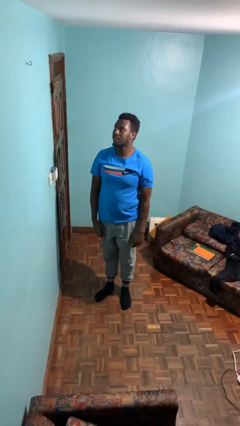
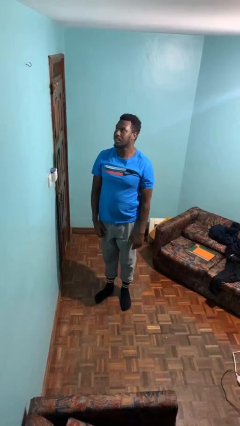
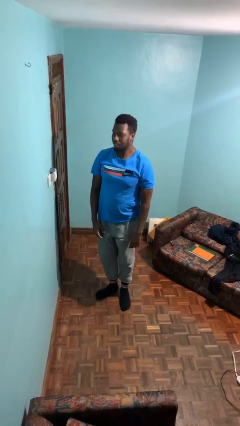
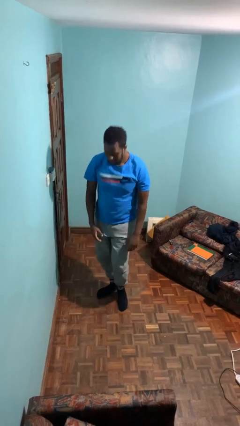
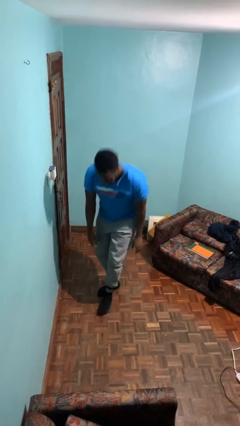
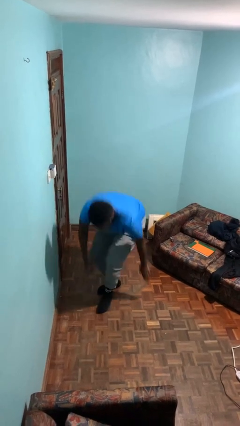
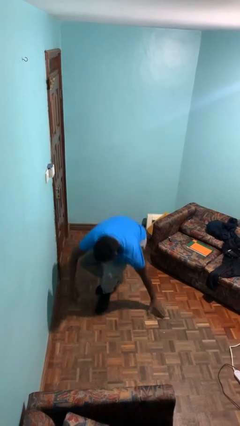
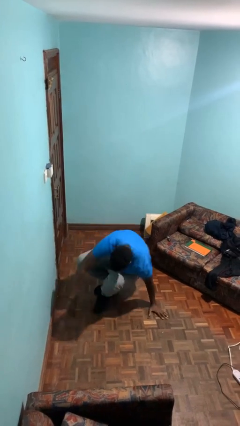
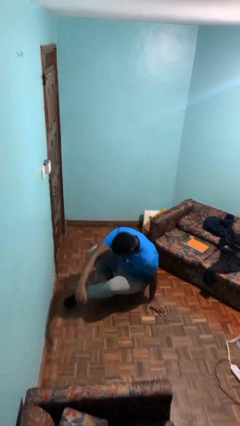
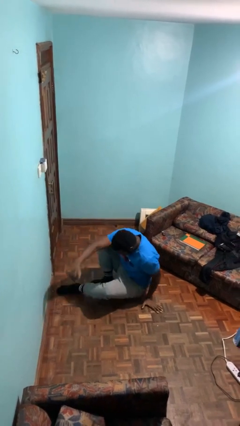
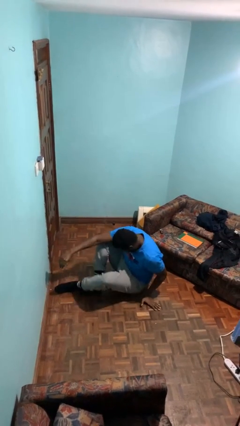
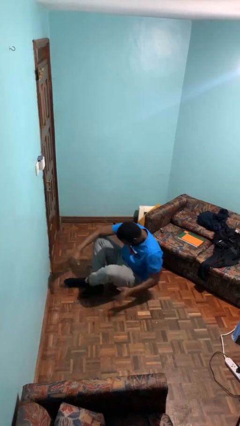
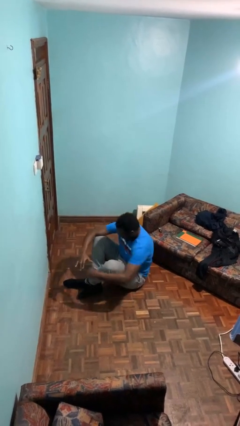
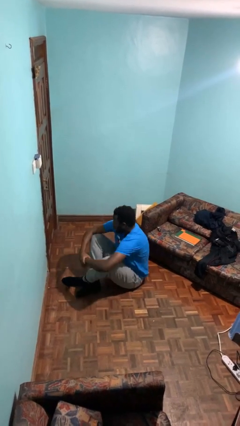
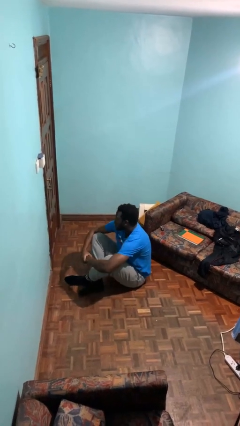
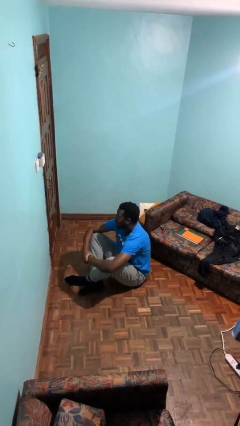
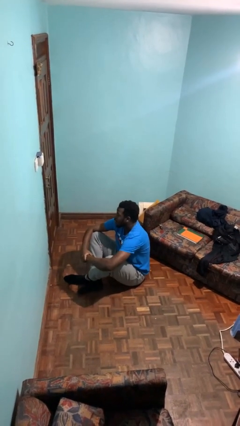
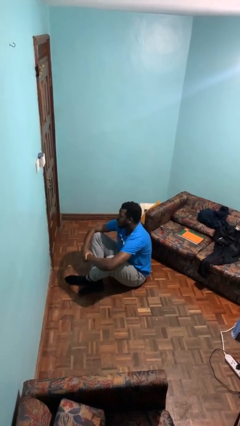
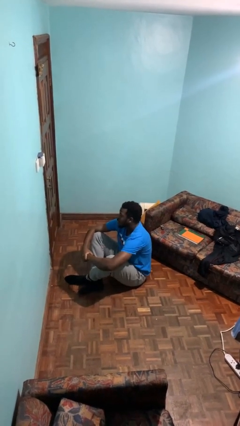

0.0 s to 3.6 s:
person sits crisscross

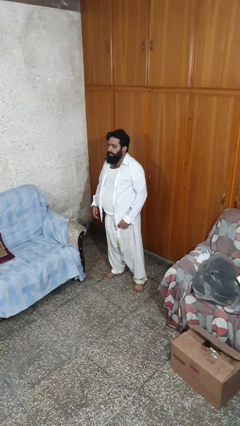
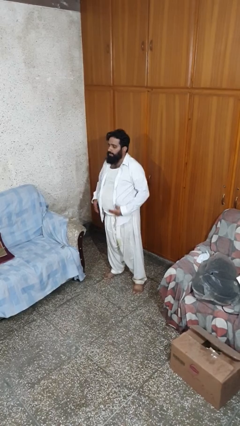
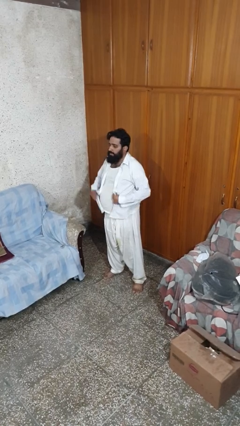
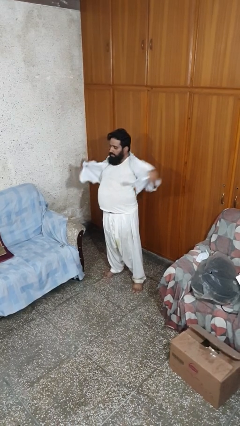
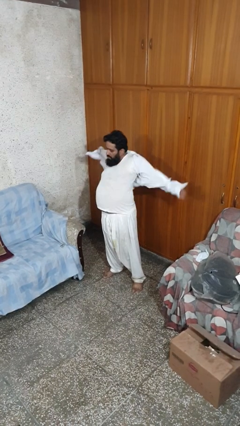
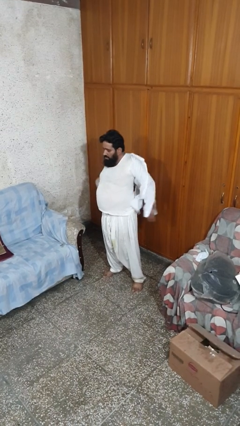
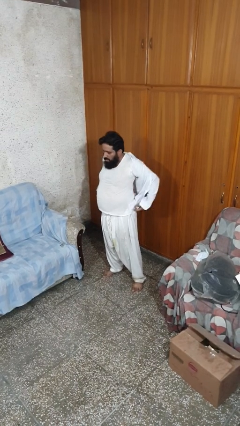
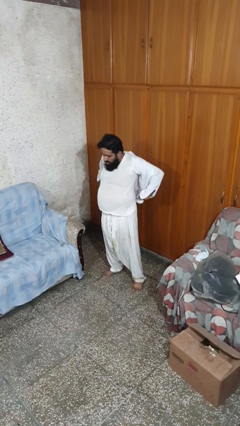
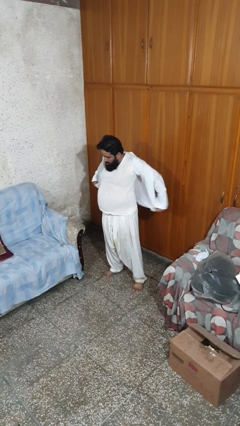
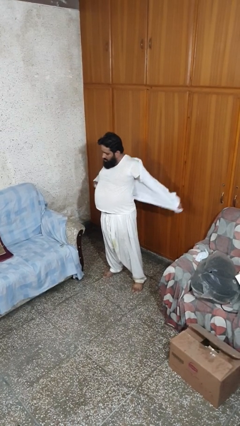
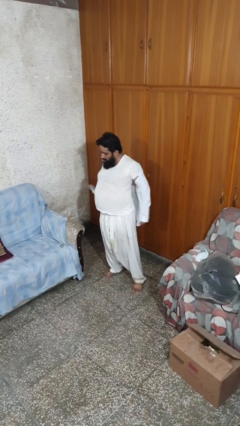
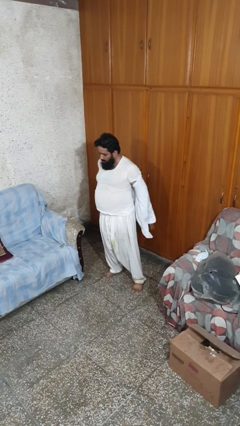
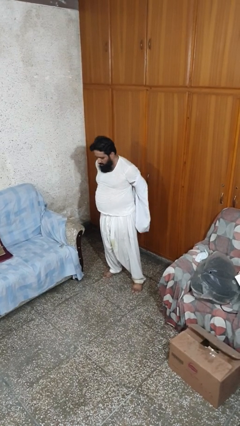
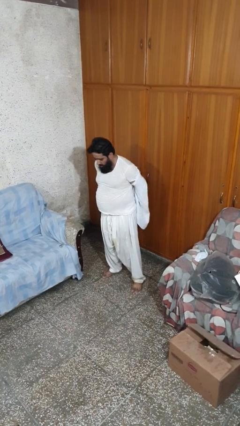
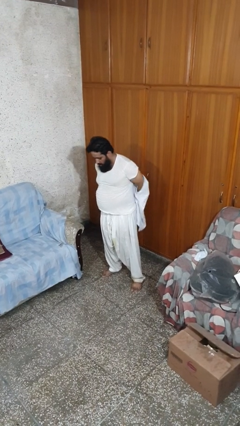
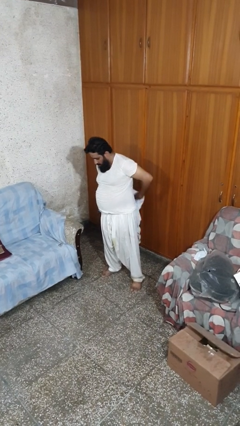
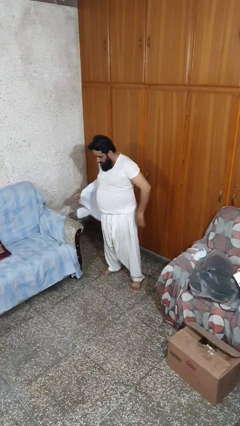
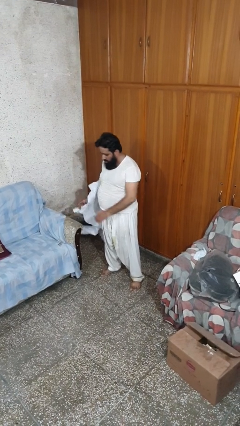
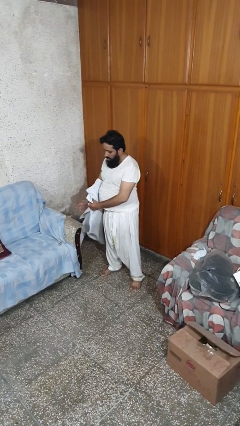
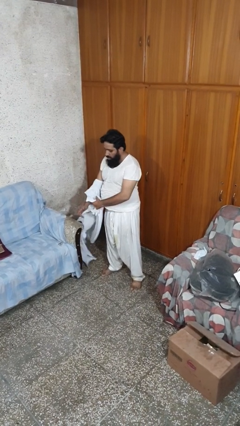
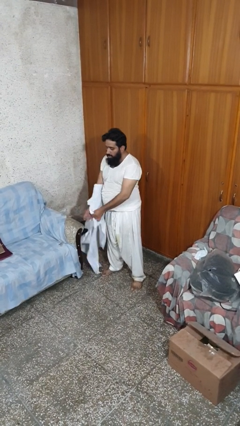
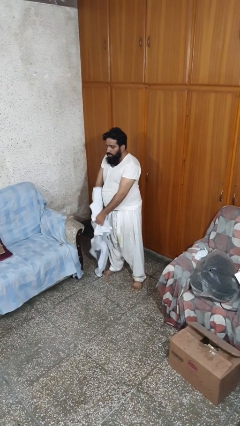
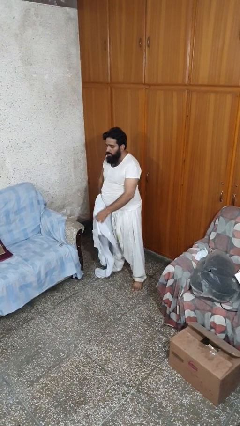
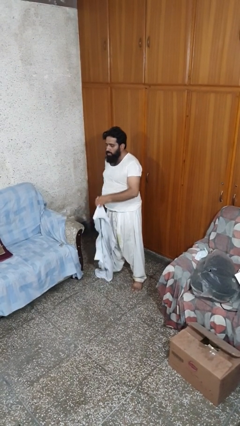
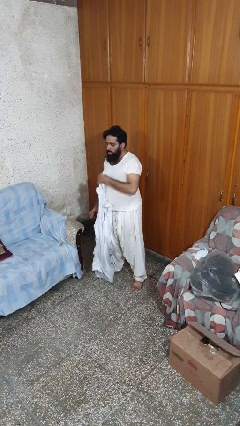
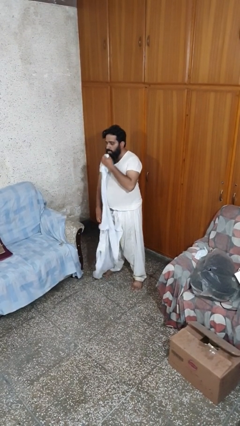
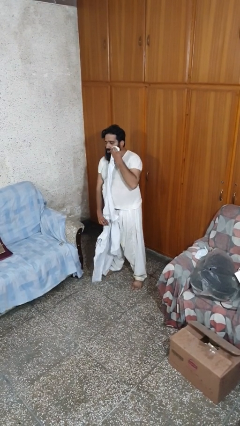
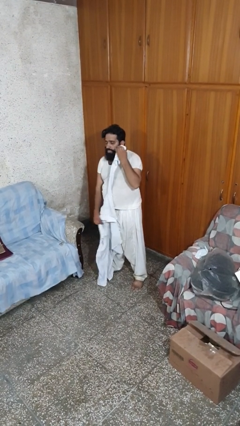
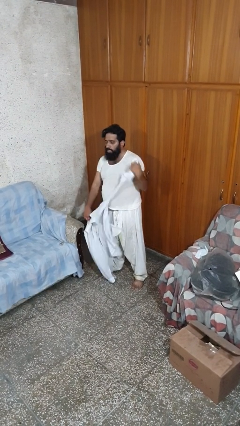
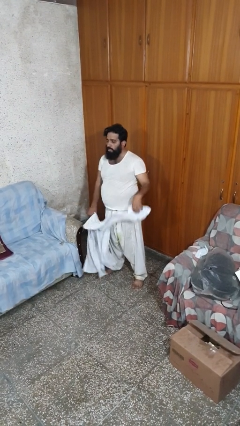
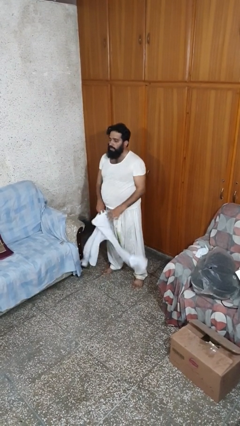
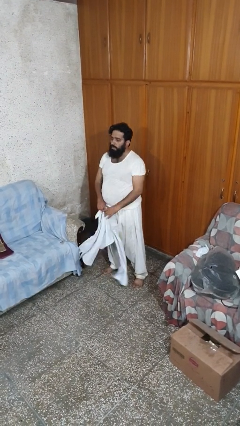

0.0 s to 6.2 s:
person takes off shirt

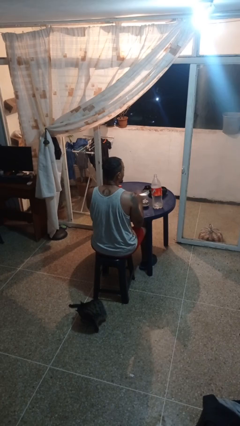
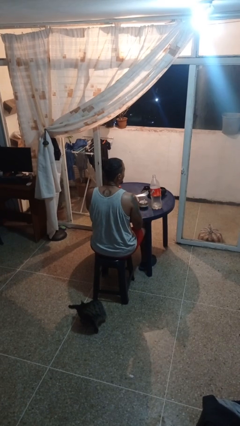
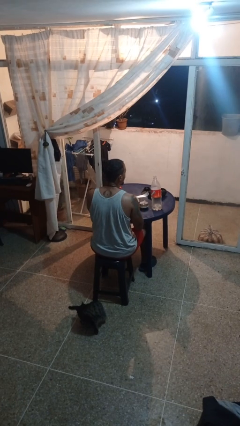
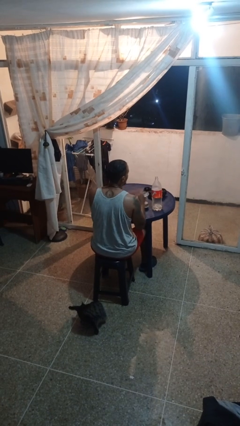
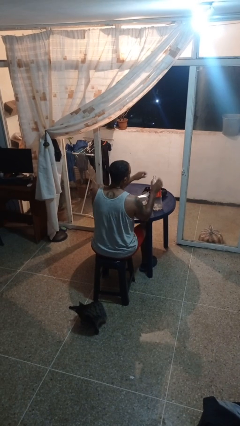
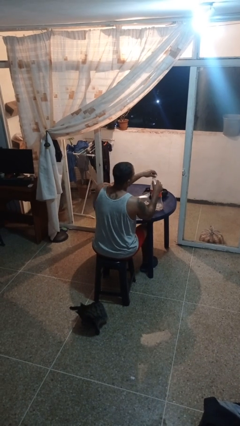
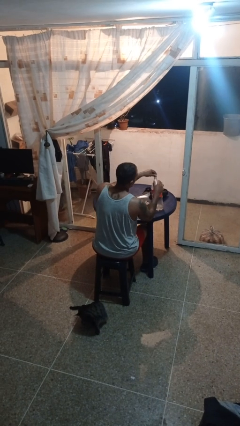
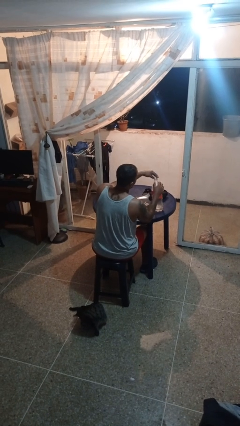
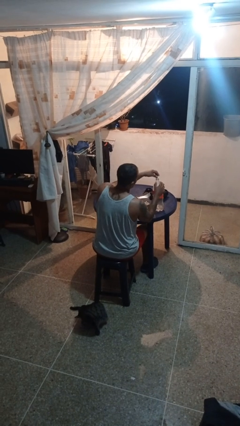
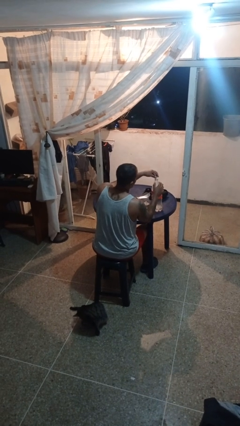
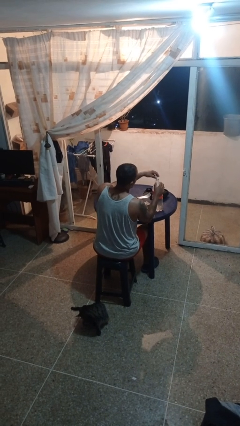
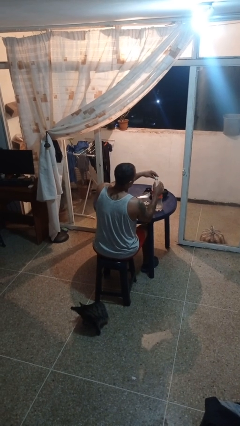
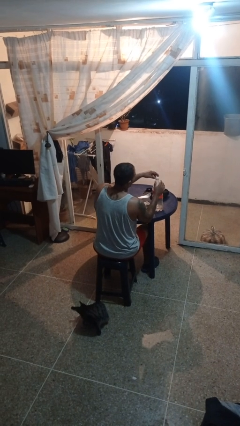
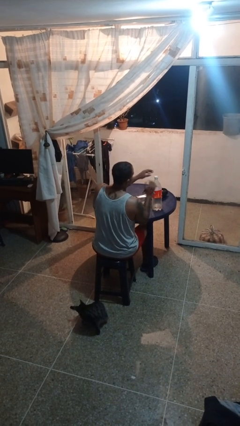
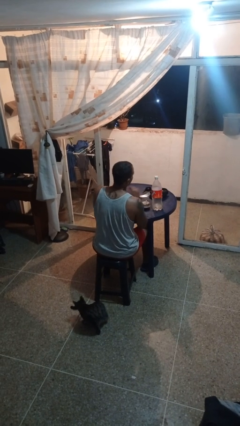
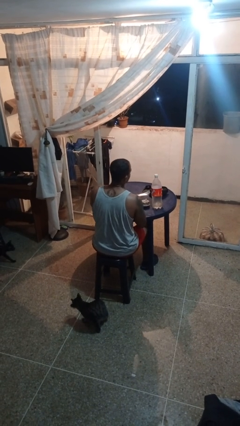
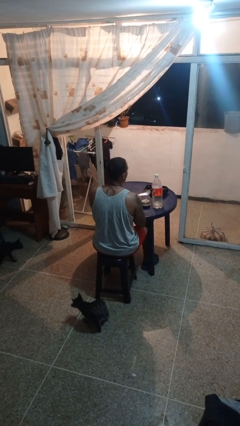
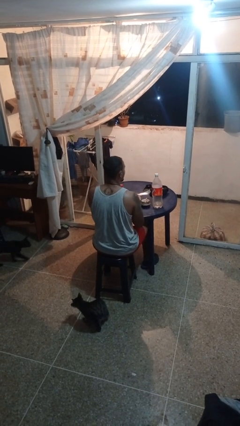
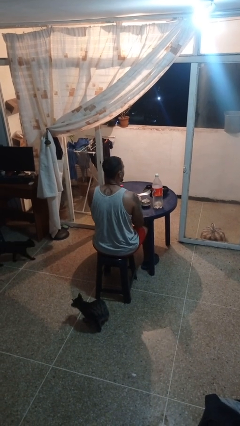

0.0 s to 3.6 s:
person screws lid to bottle

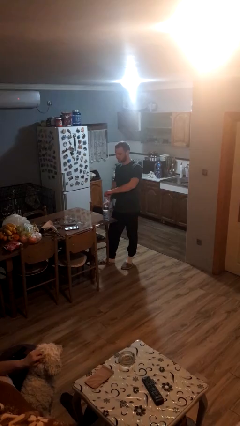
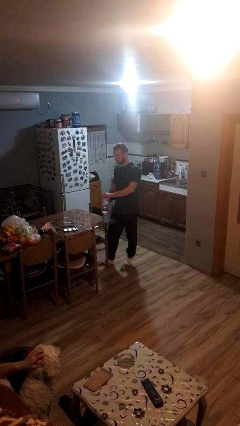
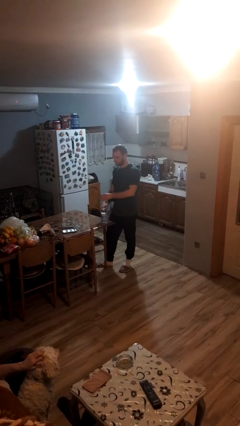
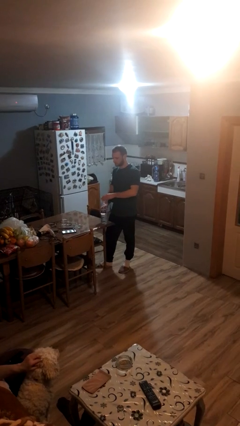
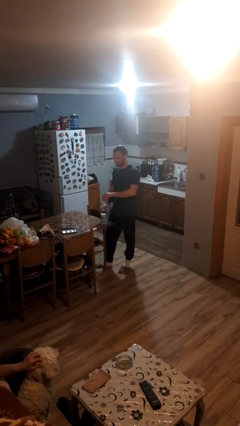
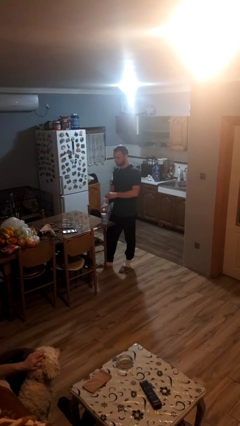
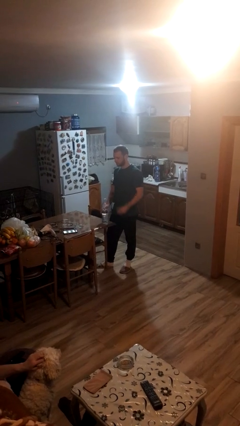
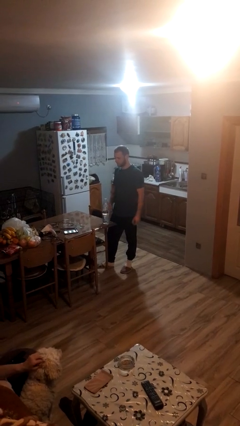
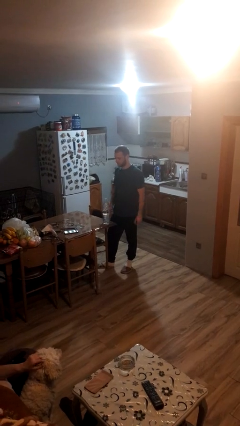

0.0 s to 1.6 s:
person unscrews lid from bottle

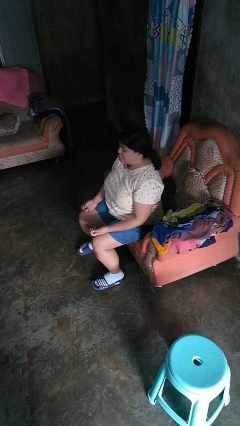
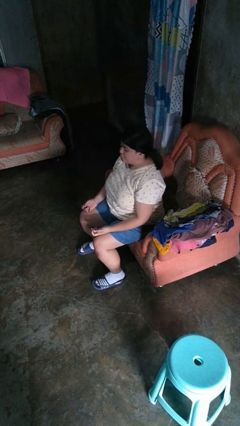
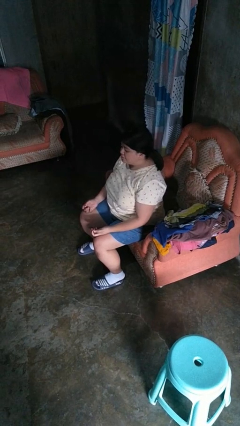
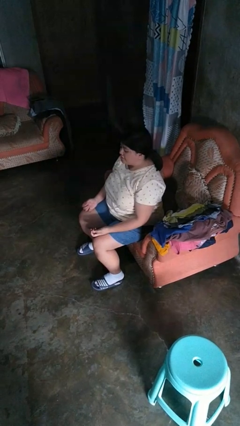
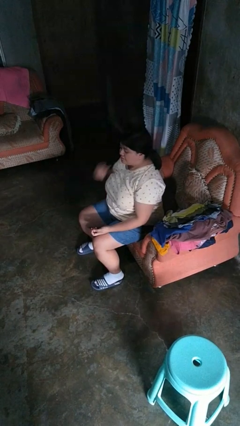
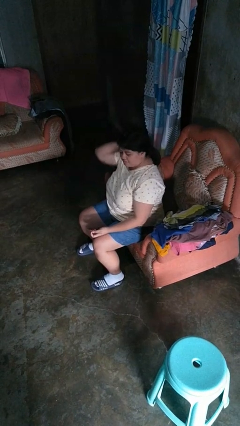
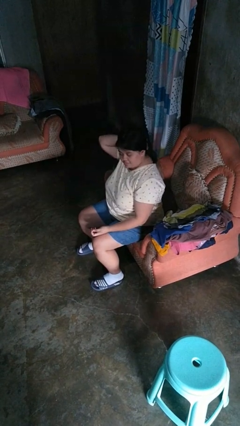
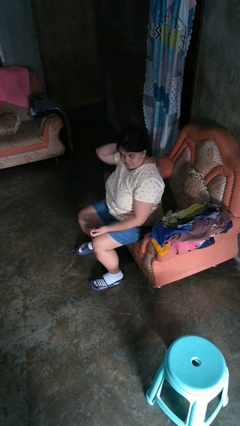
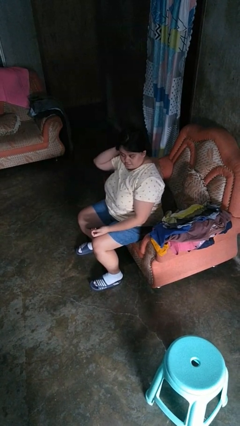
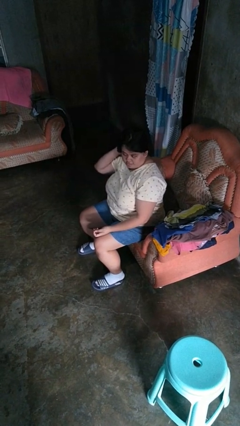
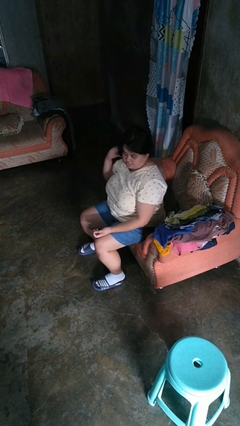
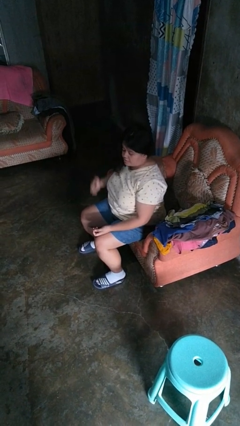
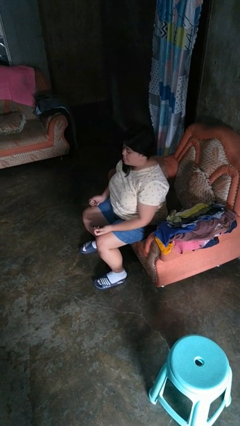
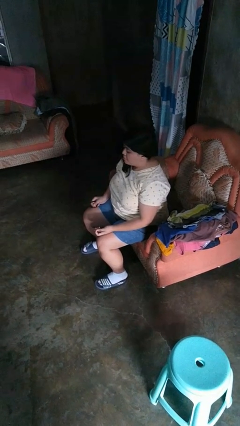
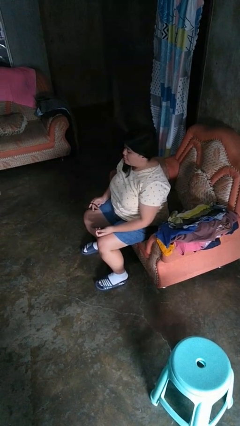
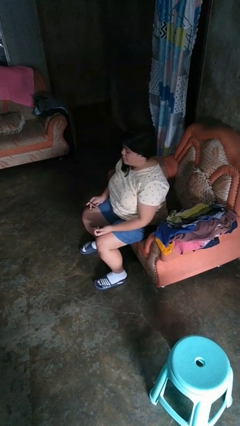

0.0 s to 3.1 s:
person takes off hairtie
